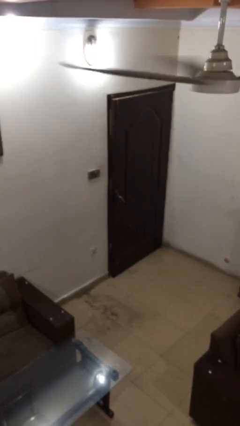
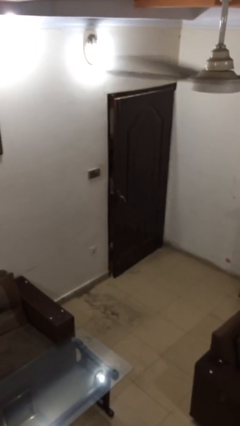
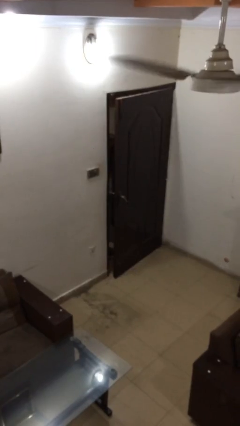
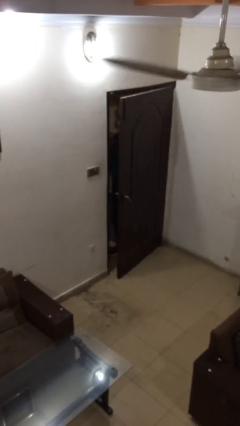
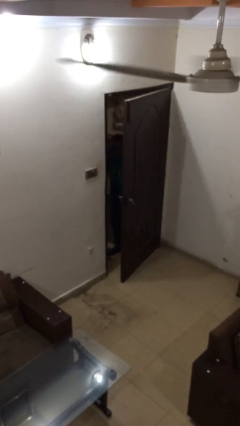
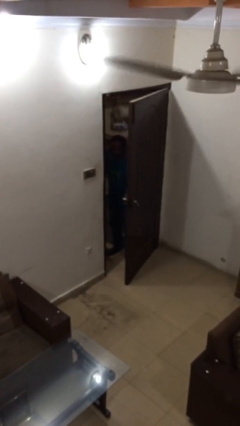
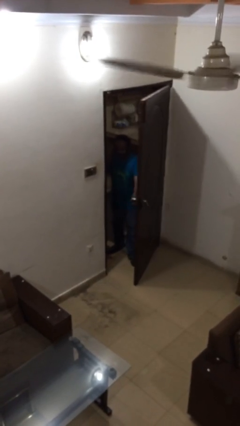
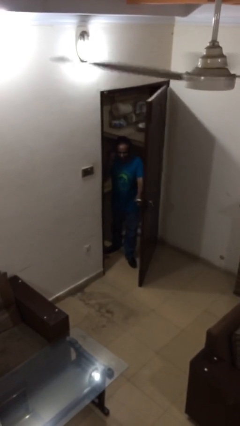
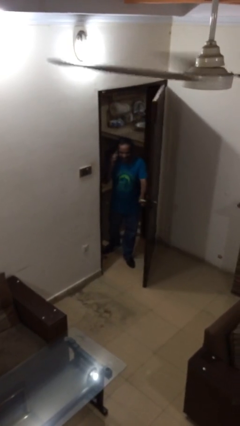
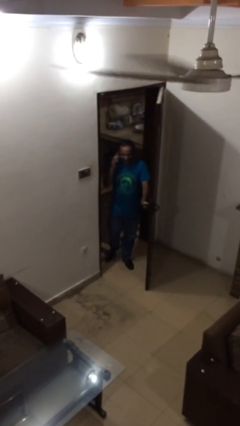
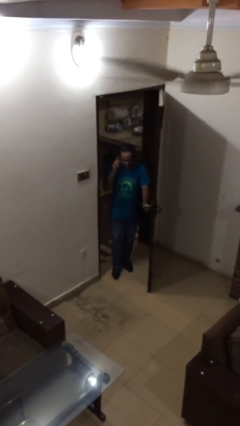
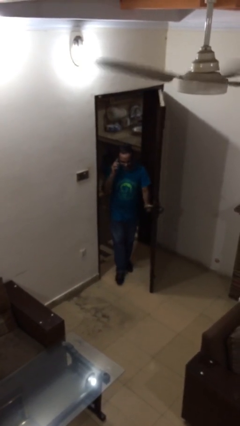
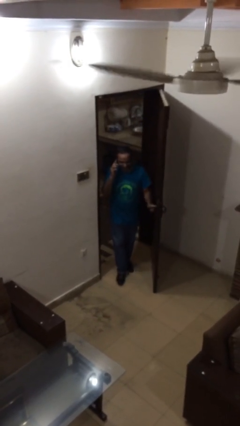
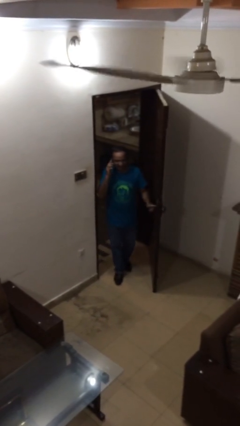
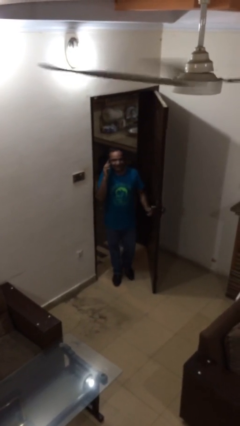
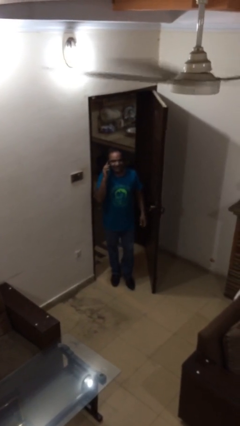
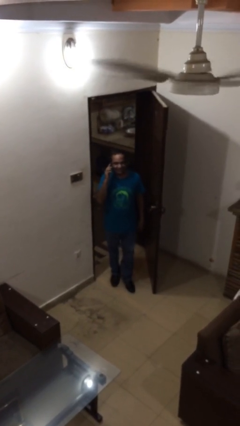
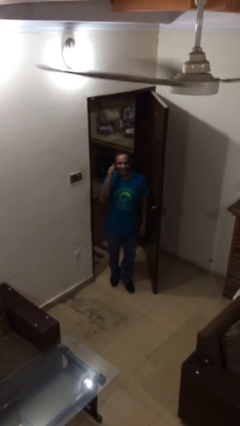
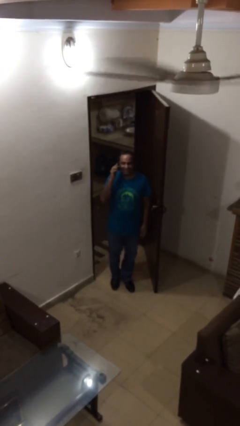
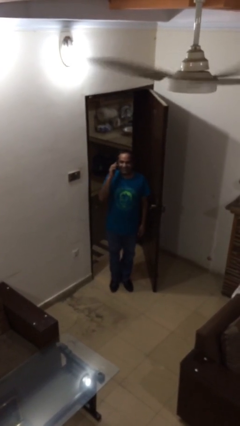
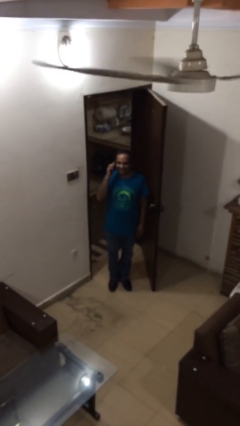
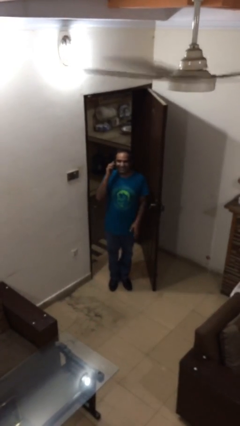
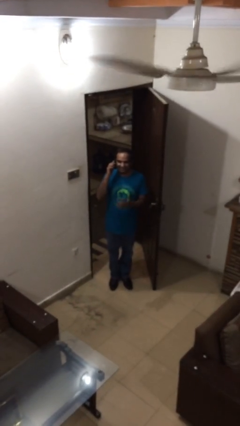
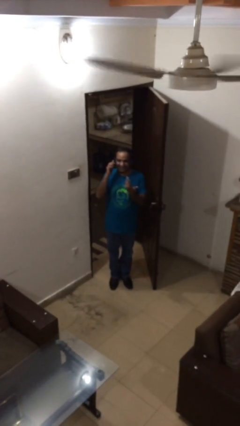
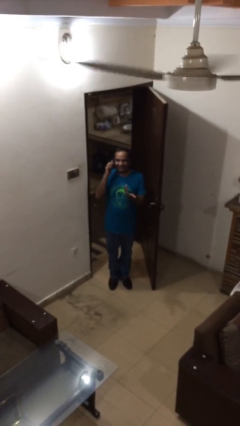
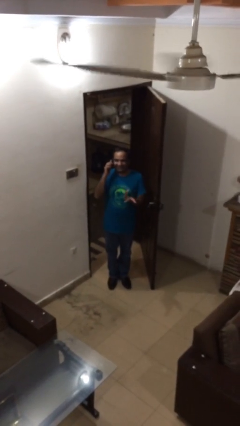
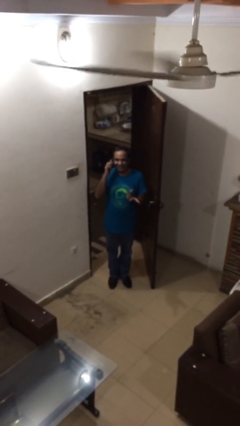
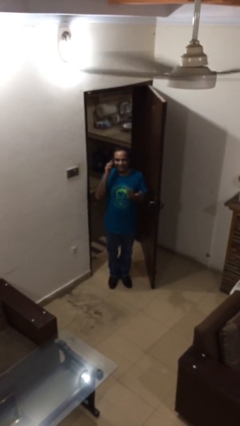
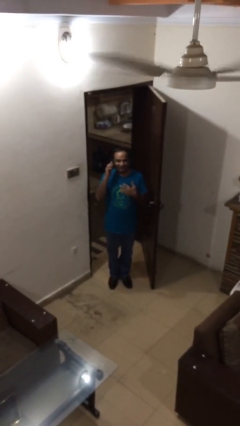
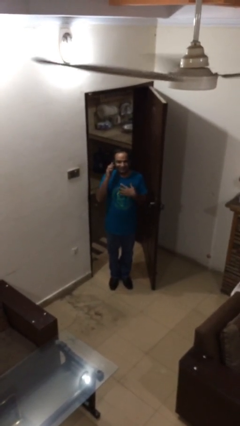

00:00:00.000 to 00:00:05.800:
person enters scene through structure

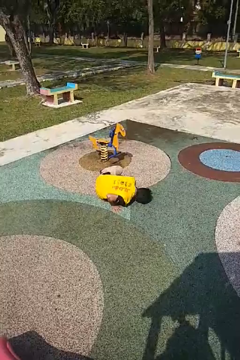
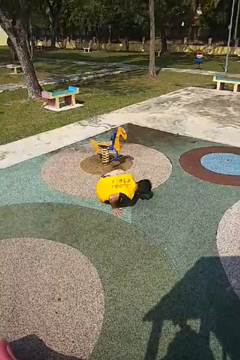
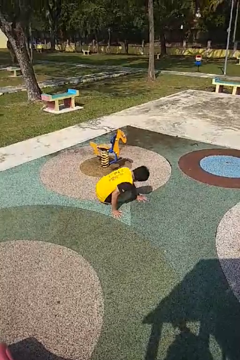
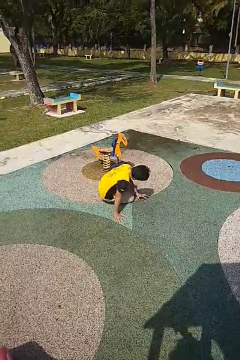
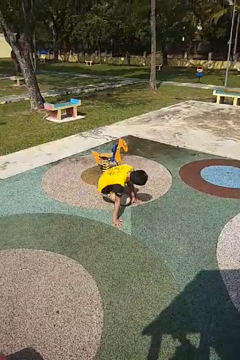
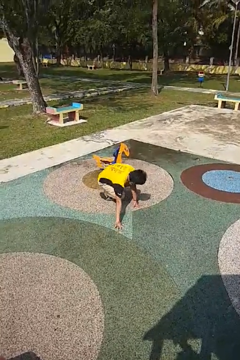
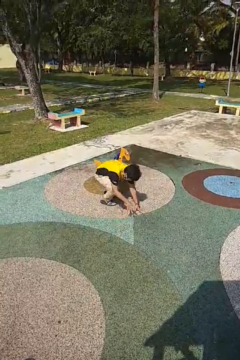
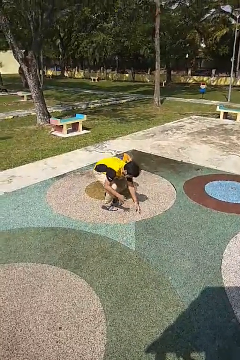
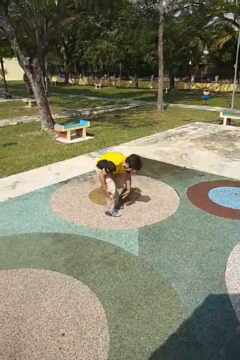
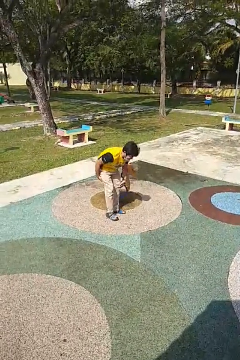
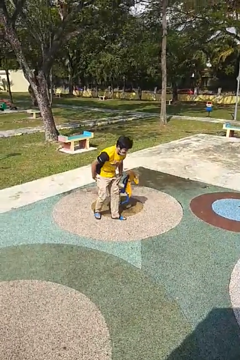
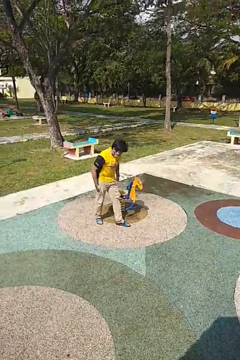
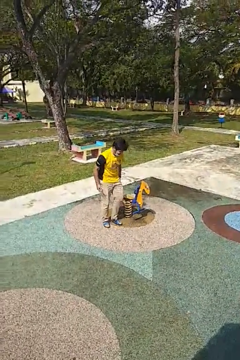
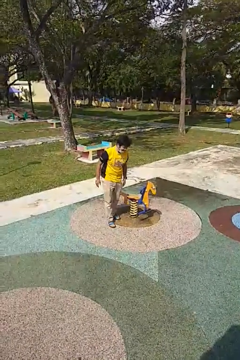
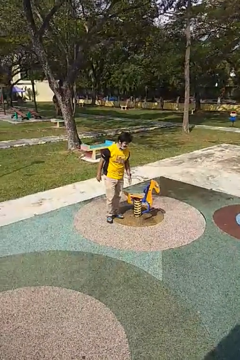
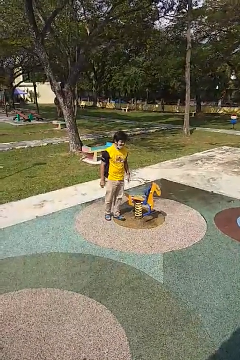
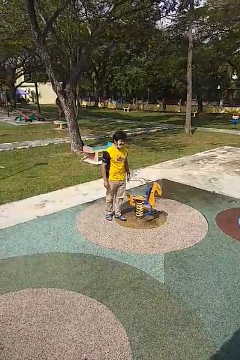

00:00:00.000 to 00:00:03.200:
person stands up from floor

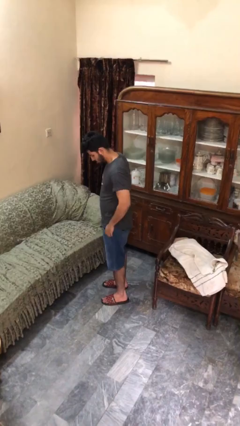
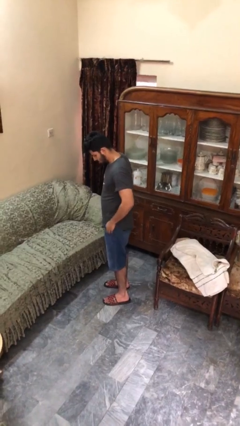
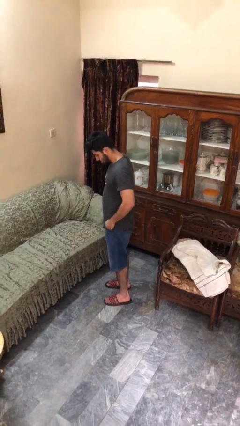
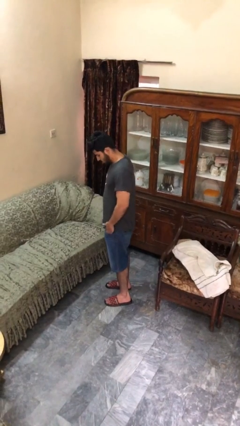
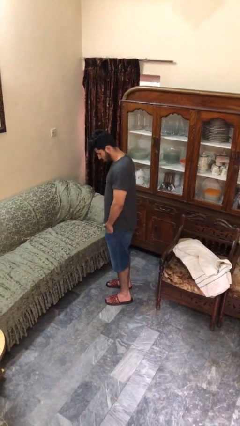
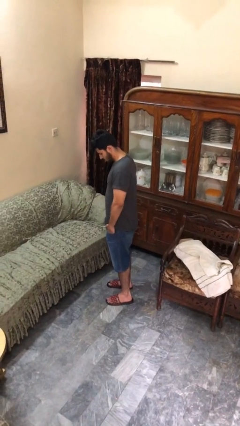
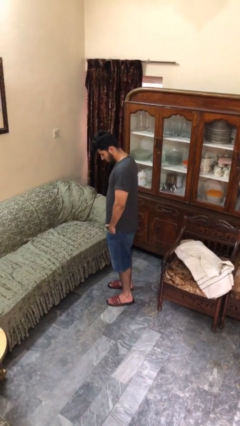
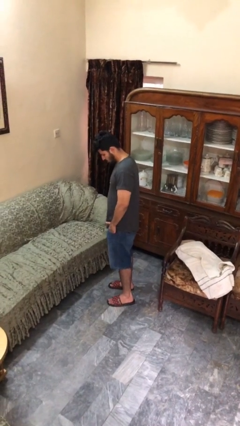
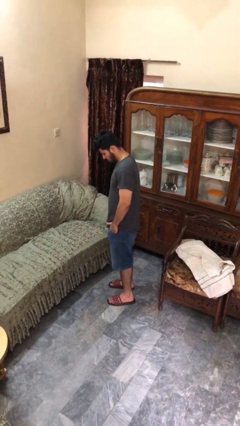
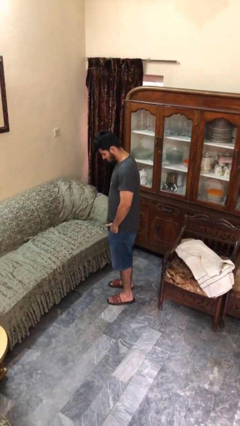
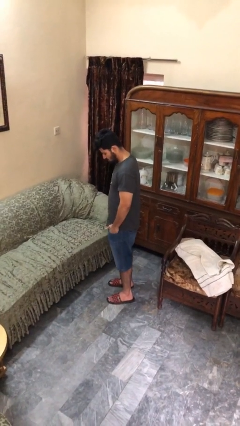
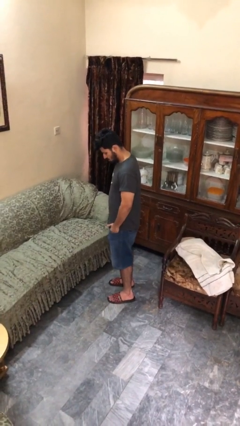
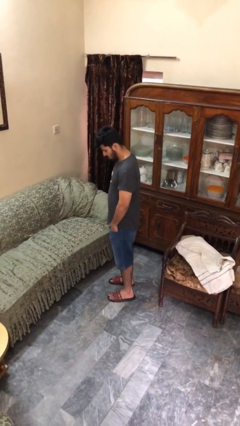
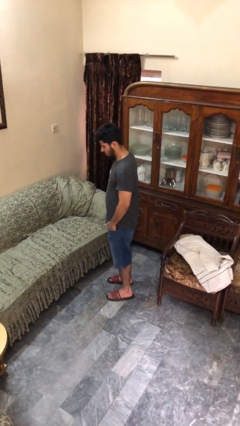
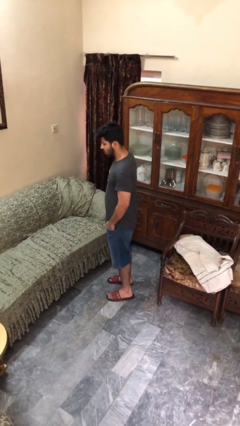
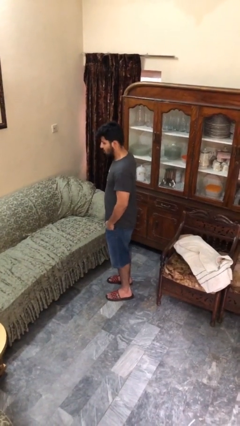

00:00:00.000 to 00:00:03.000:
person puts hands in back pockets

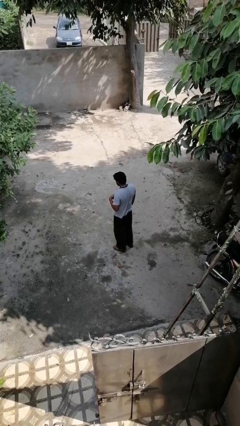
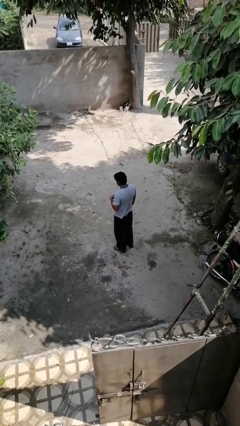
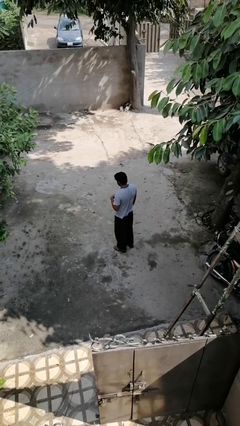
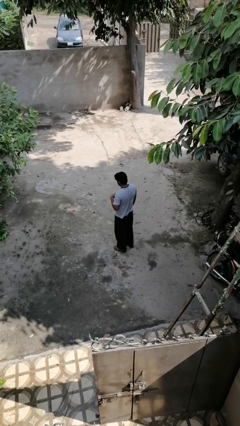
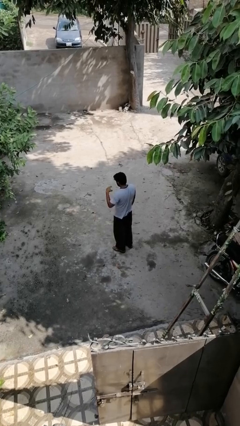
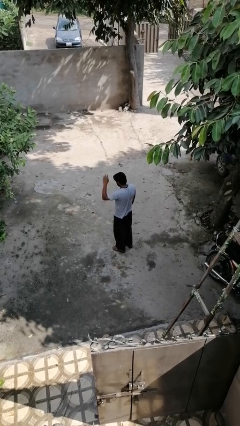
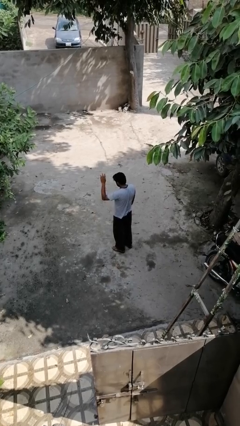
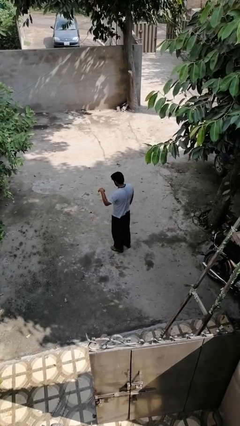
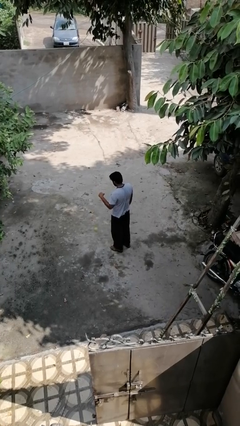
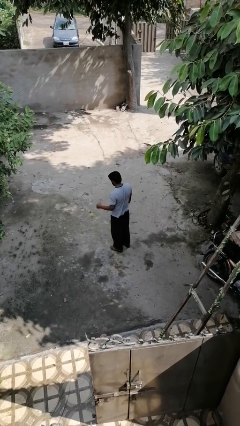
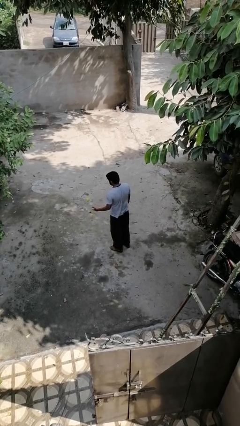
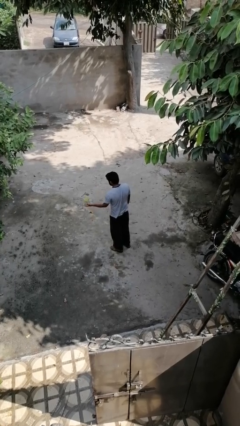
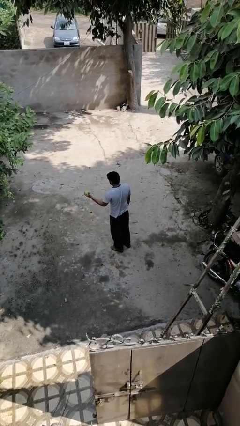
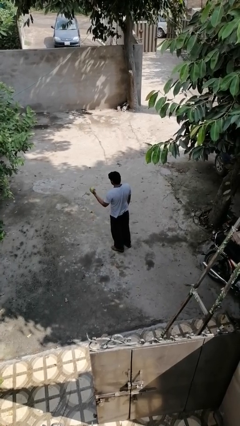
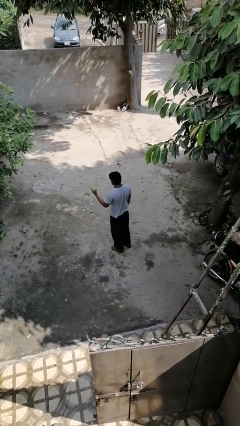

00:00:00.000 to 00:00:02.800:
person bounces ball on floor

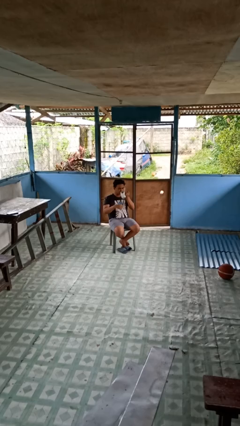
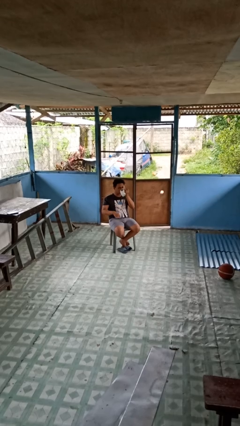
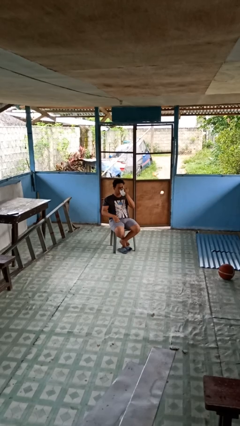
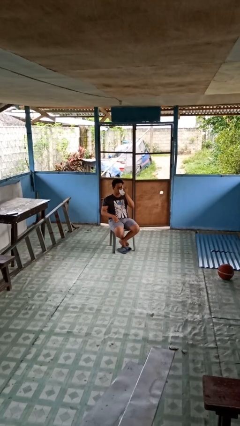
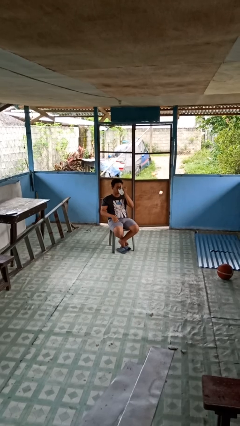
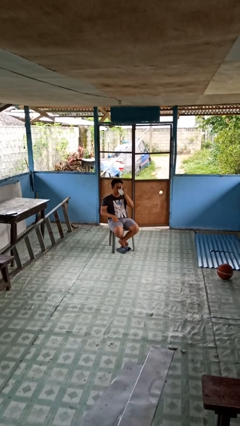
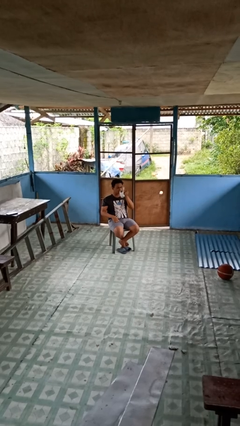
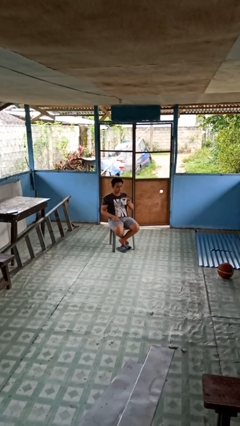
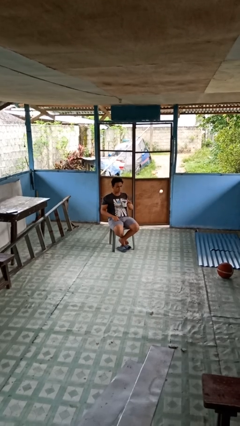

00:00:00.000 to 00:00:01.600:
person drinks from mug

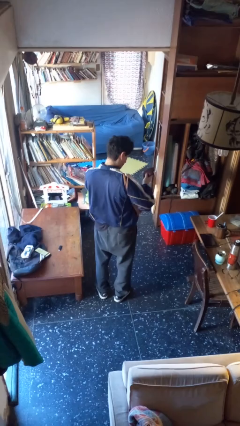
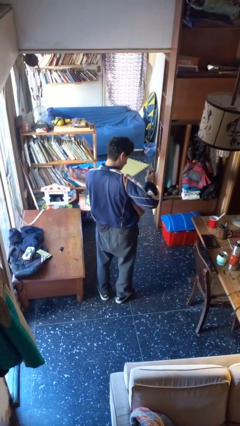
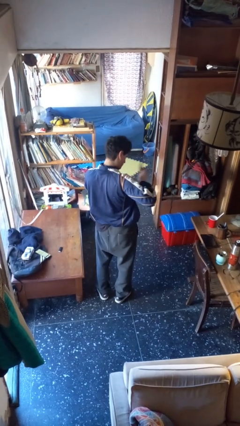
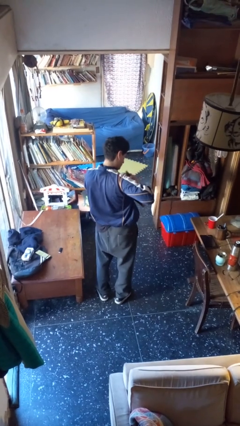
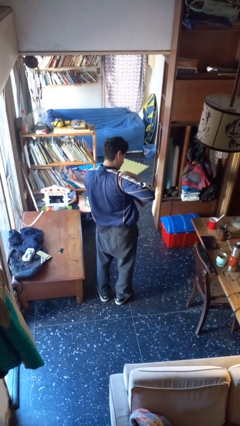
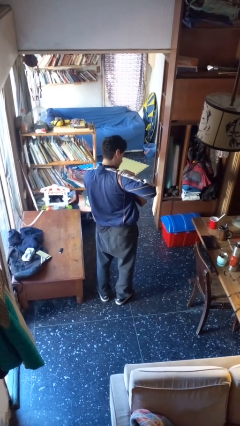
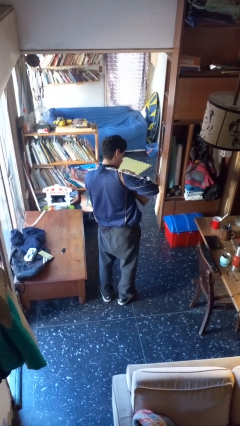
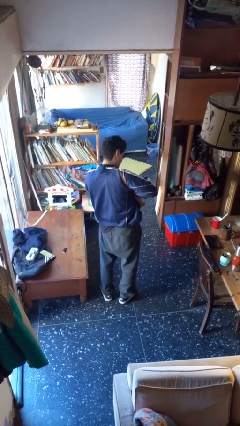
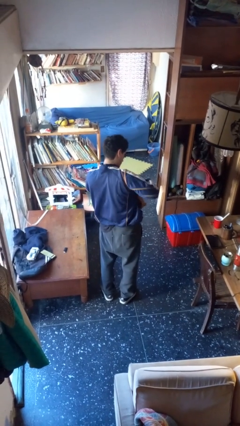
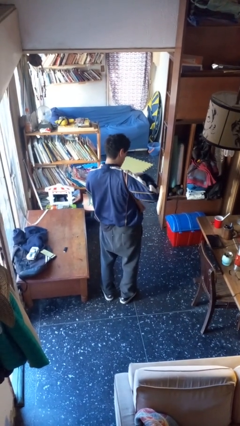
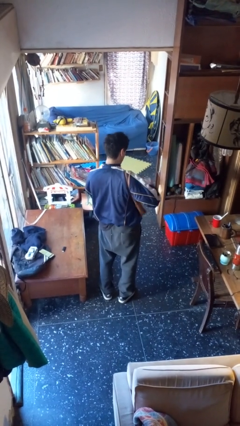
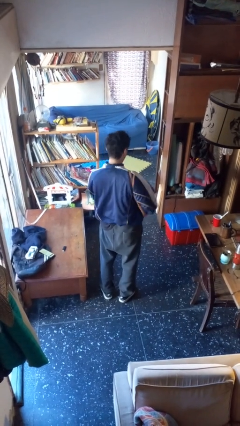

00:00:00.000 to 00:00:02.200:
person puts object into purse
